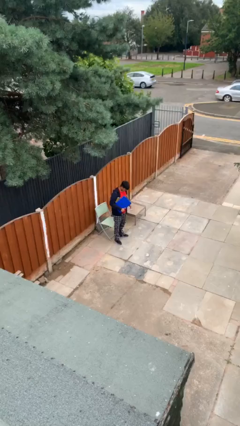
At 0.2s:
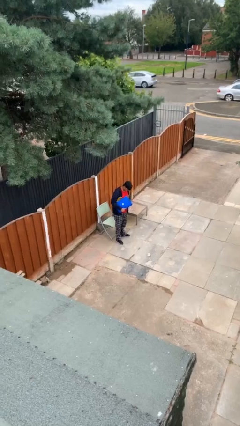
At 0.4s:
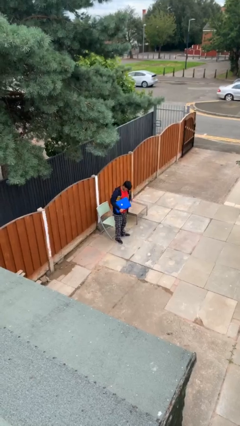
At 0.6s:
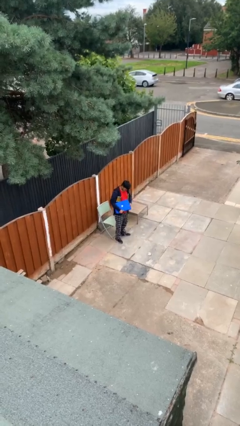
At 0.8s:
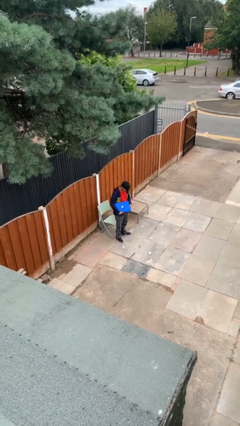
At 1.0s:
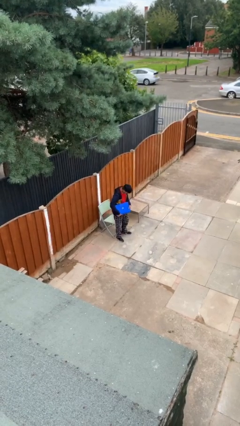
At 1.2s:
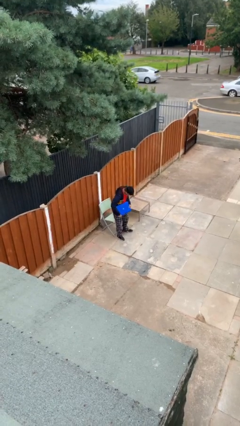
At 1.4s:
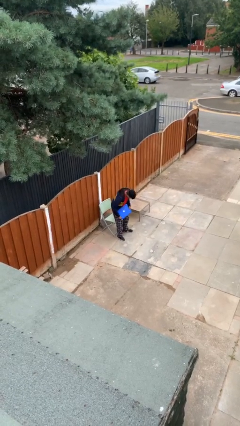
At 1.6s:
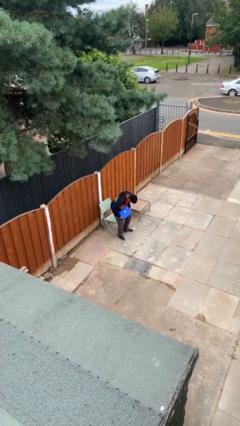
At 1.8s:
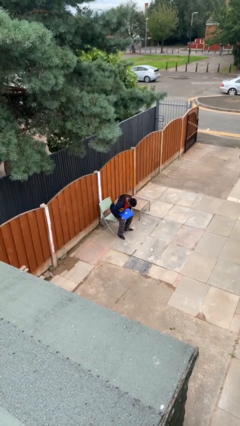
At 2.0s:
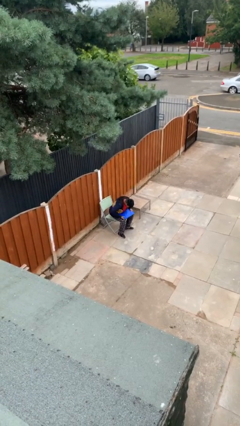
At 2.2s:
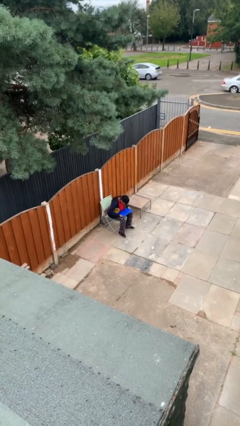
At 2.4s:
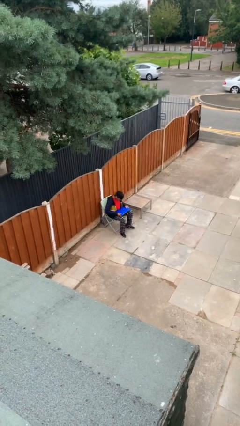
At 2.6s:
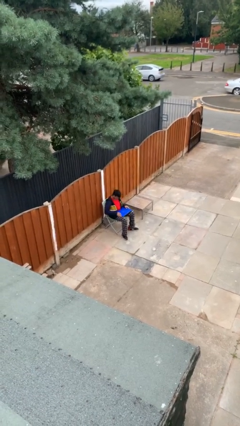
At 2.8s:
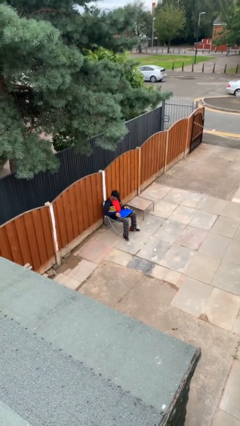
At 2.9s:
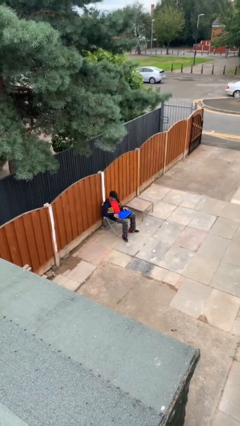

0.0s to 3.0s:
person sits down

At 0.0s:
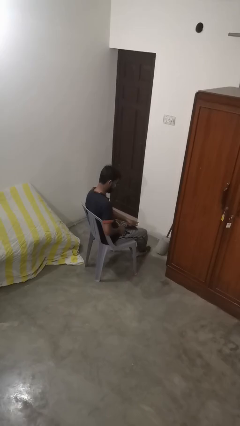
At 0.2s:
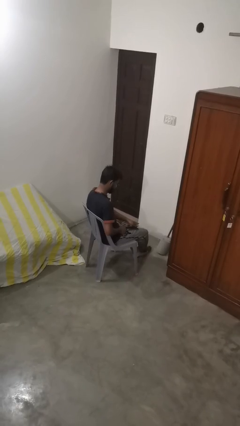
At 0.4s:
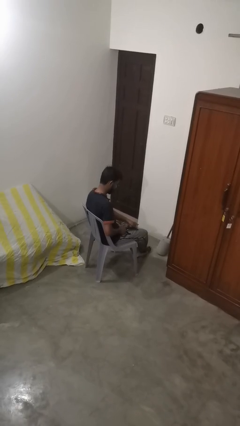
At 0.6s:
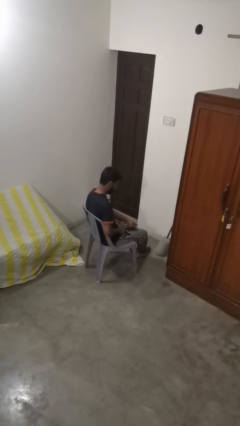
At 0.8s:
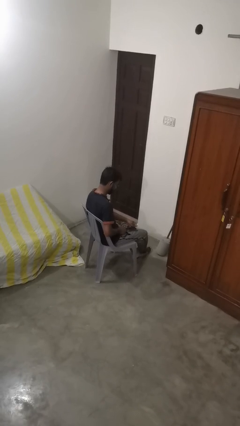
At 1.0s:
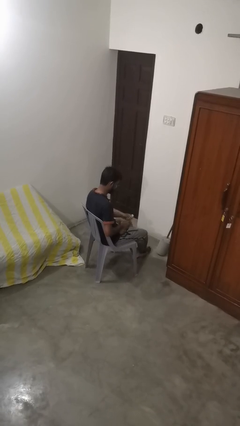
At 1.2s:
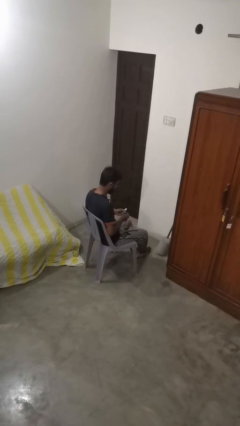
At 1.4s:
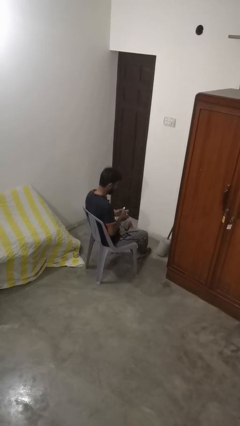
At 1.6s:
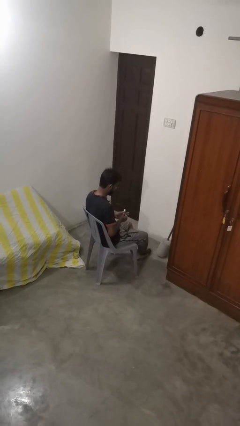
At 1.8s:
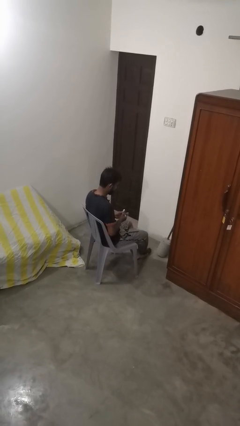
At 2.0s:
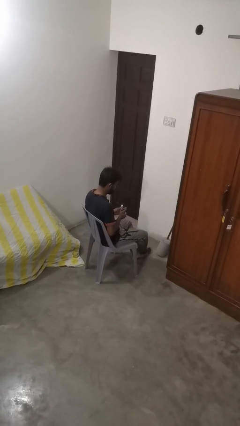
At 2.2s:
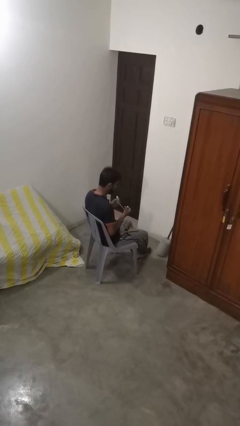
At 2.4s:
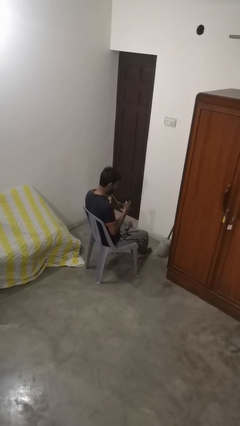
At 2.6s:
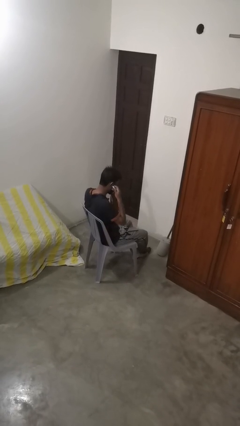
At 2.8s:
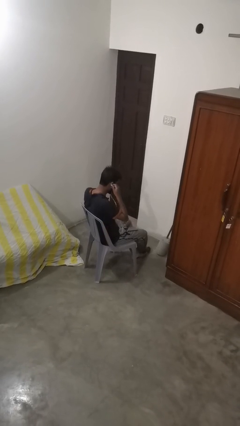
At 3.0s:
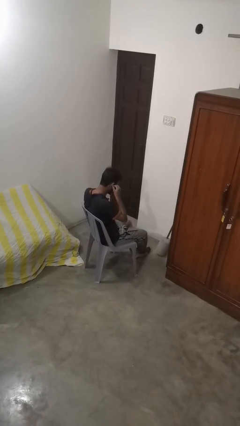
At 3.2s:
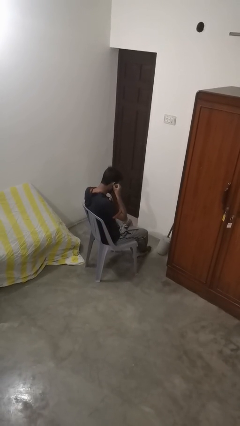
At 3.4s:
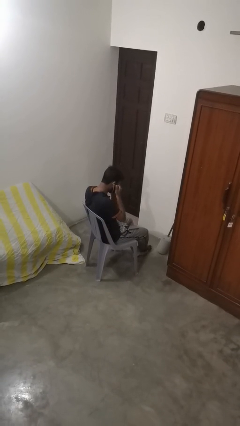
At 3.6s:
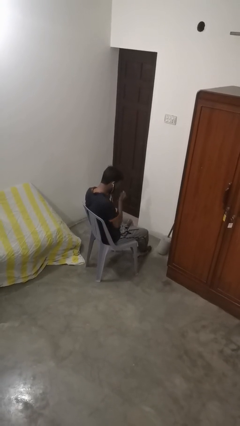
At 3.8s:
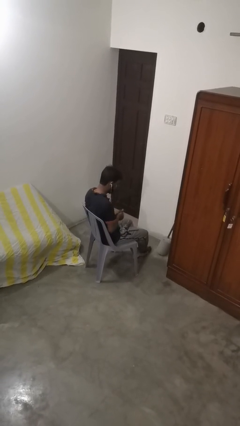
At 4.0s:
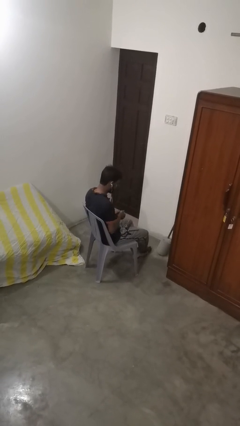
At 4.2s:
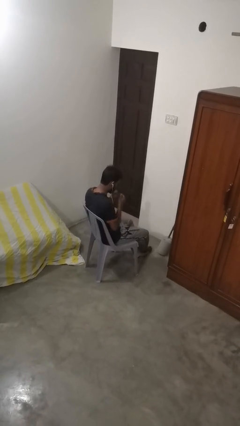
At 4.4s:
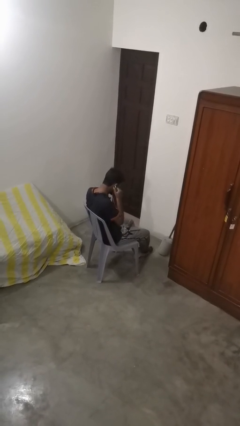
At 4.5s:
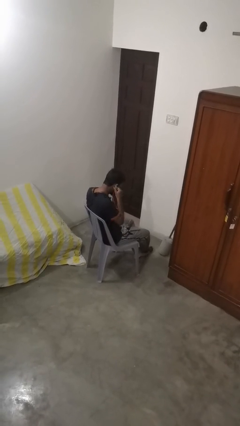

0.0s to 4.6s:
person puts on headphones

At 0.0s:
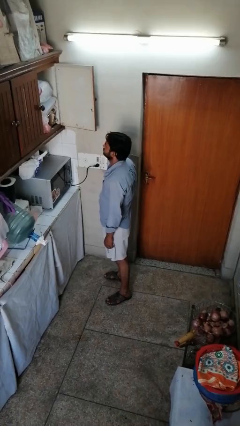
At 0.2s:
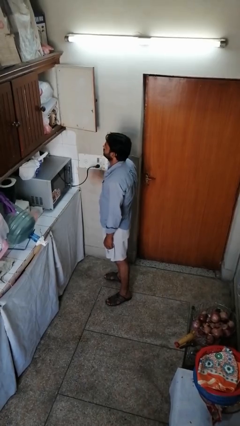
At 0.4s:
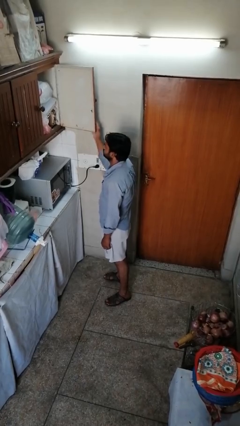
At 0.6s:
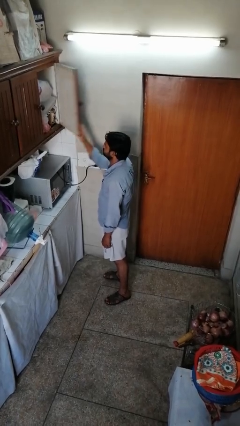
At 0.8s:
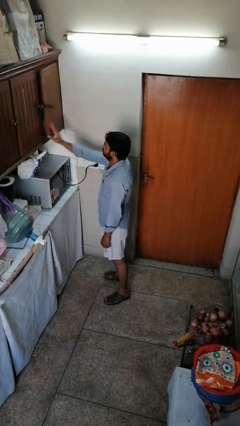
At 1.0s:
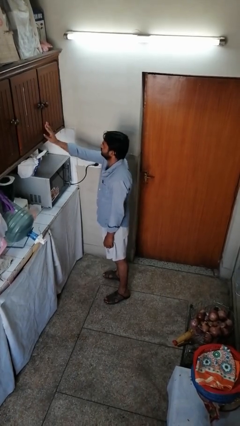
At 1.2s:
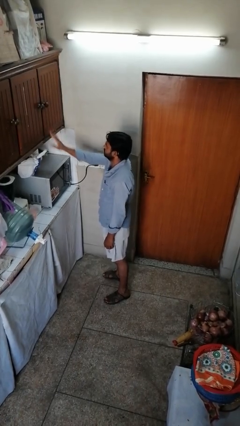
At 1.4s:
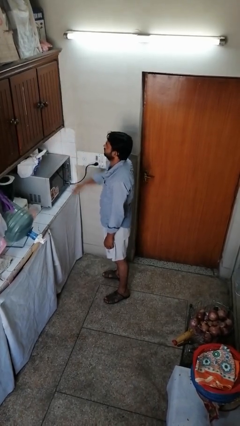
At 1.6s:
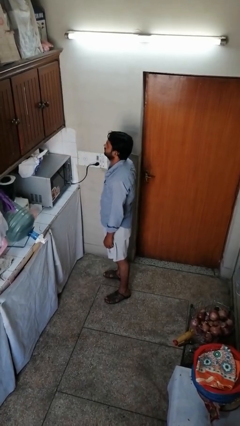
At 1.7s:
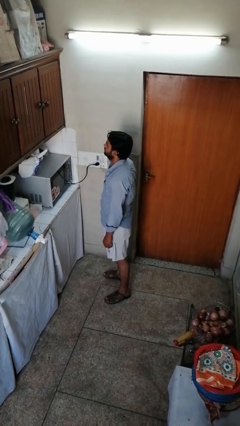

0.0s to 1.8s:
person closes cabinet

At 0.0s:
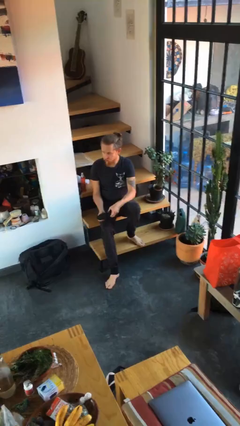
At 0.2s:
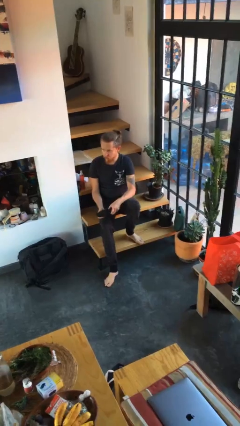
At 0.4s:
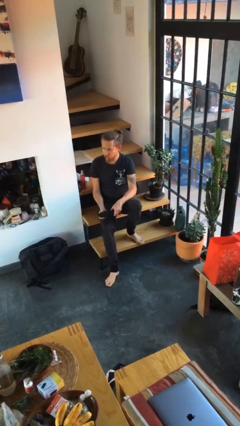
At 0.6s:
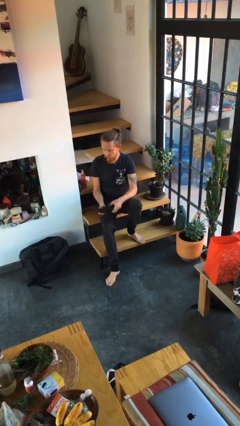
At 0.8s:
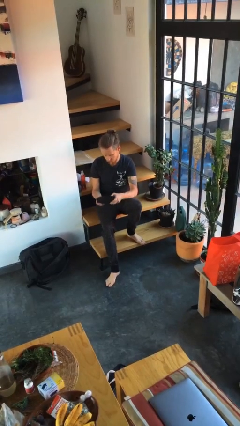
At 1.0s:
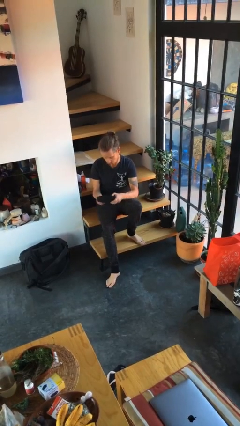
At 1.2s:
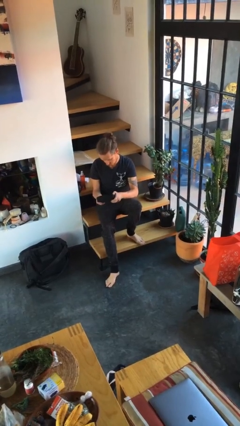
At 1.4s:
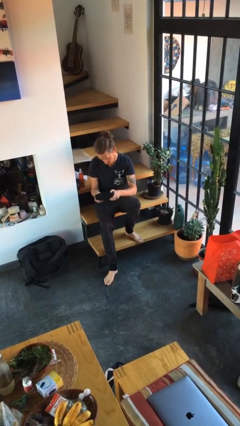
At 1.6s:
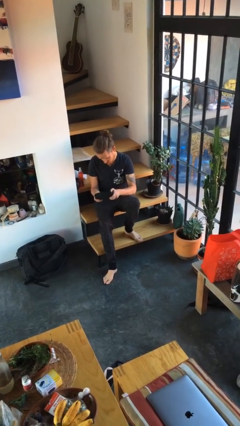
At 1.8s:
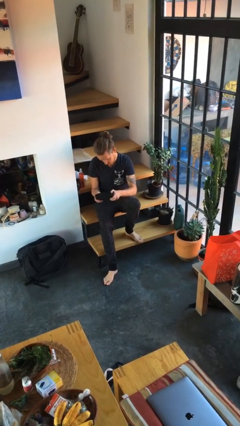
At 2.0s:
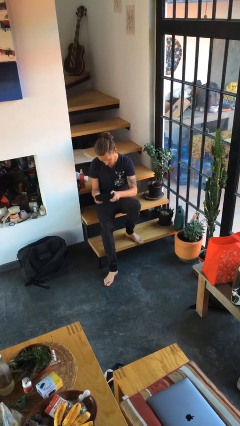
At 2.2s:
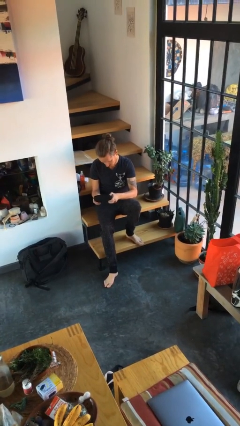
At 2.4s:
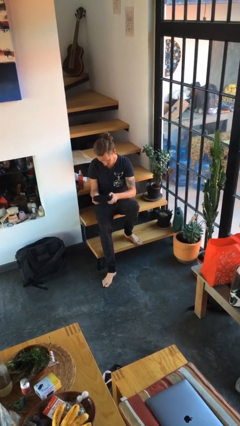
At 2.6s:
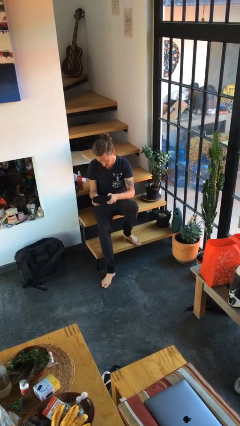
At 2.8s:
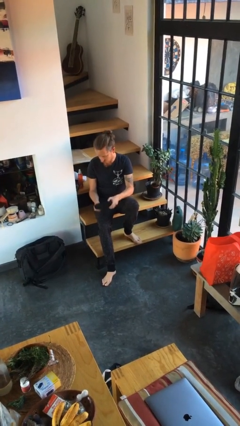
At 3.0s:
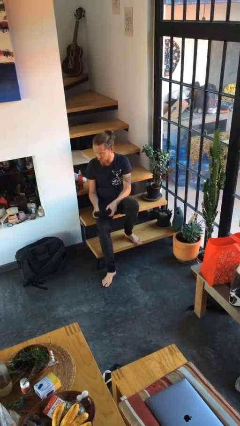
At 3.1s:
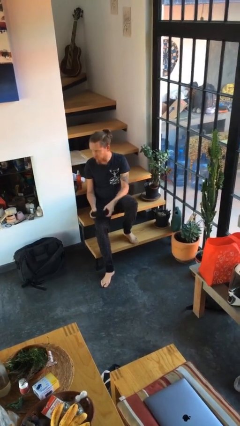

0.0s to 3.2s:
person interacts with handheld game

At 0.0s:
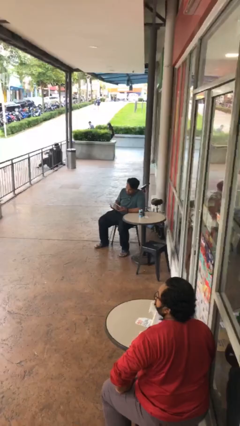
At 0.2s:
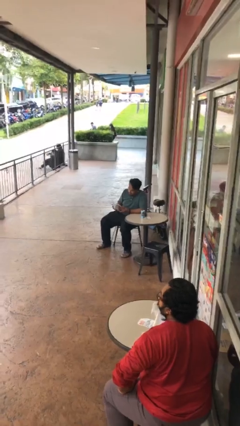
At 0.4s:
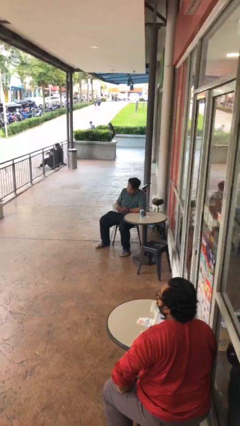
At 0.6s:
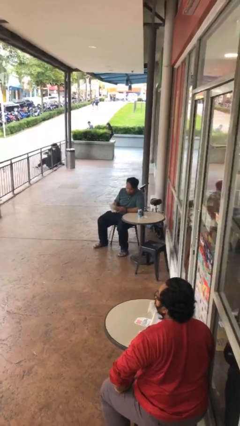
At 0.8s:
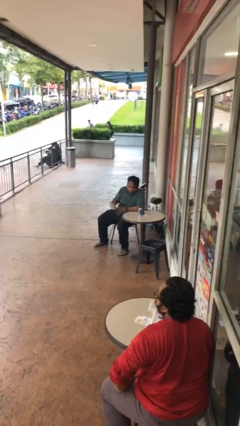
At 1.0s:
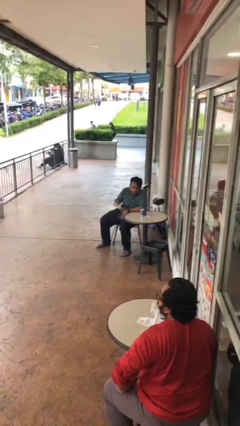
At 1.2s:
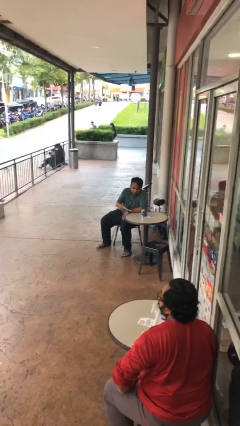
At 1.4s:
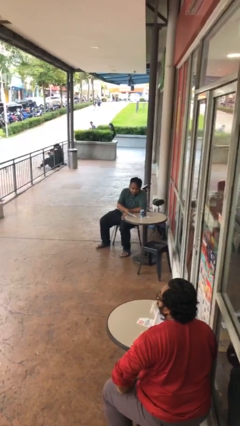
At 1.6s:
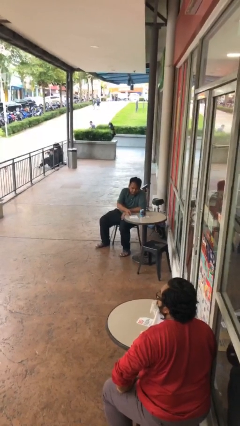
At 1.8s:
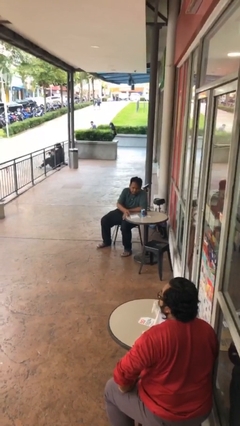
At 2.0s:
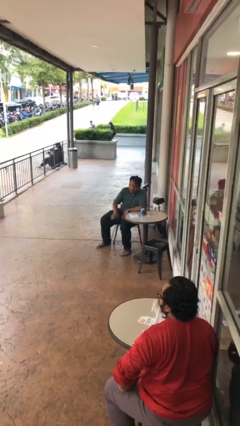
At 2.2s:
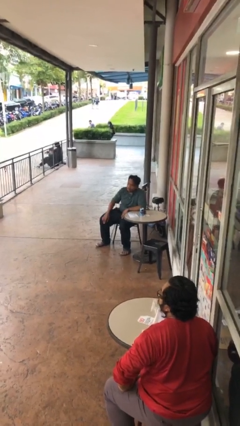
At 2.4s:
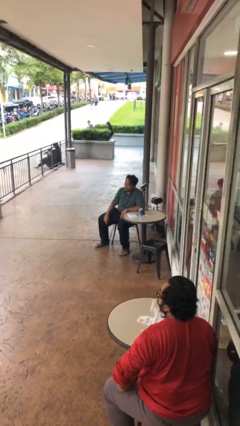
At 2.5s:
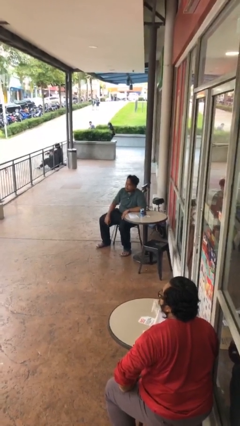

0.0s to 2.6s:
person puts down object on table

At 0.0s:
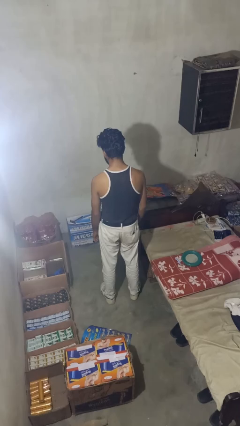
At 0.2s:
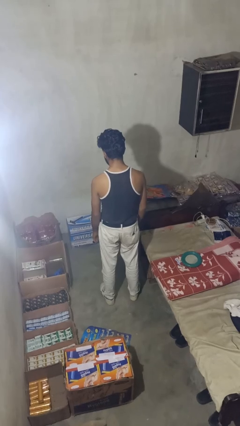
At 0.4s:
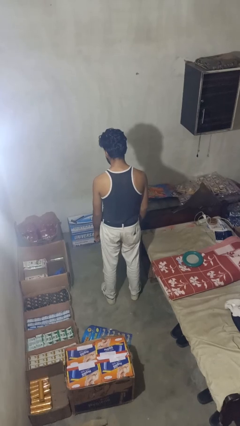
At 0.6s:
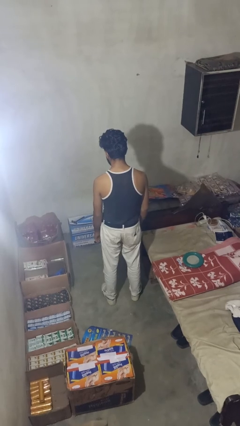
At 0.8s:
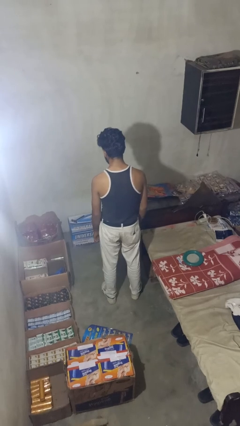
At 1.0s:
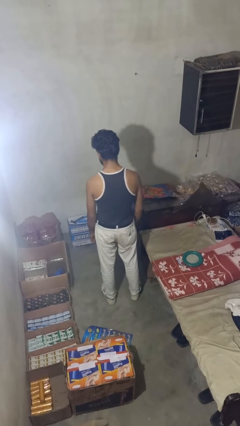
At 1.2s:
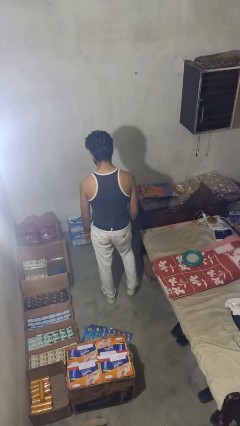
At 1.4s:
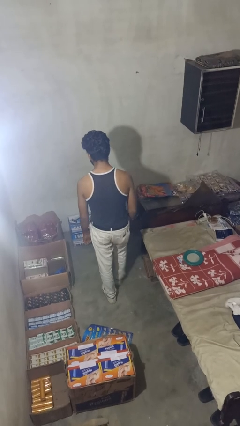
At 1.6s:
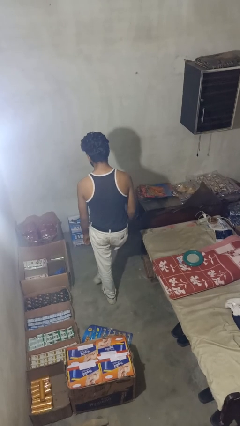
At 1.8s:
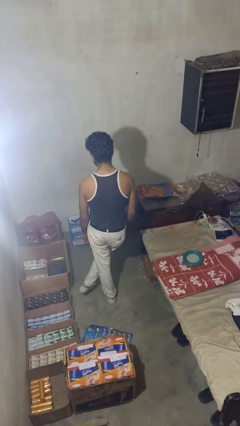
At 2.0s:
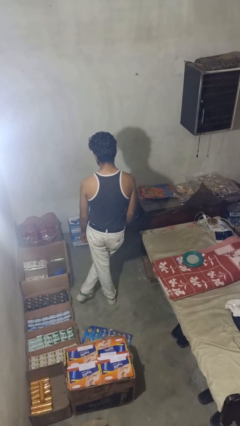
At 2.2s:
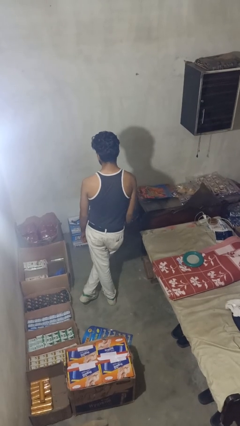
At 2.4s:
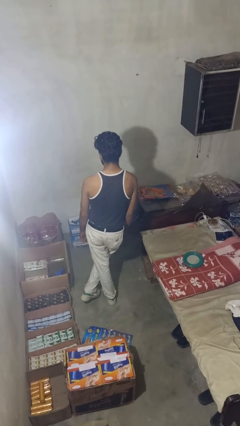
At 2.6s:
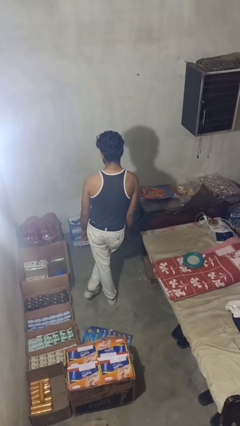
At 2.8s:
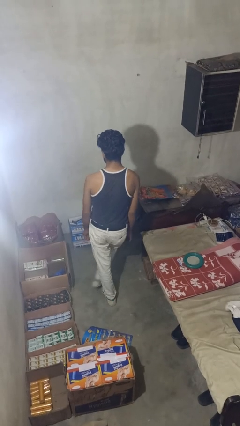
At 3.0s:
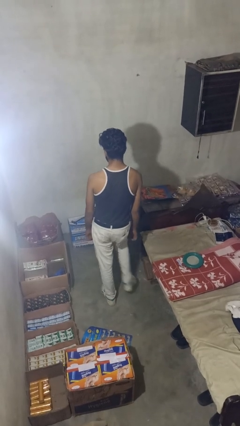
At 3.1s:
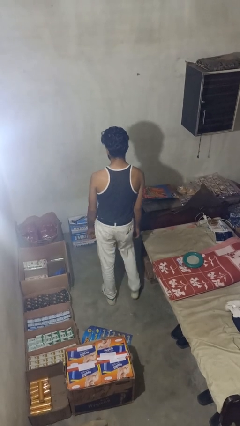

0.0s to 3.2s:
person crosses legs
